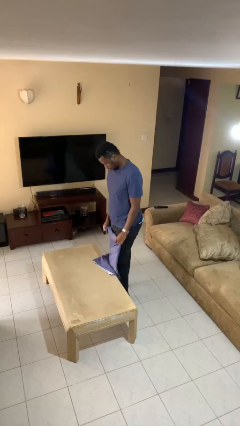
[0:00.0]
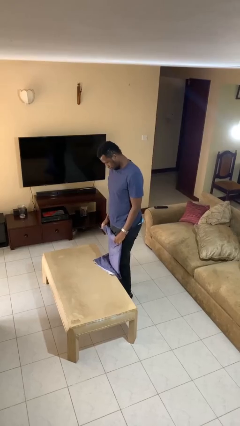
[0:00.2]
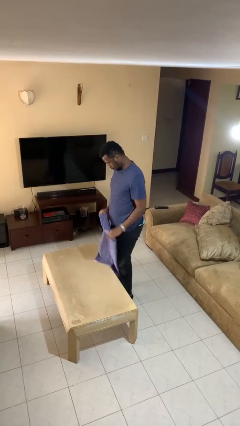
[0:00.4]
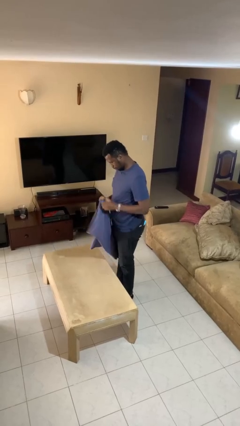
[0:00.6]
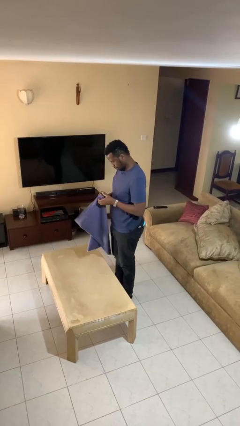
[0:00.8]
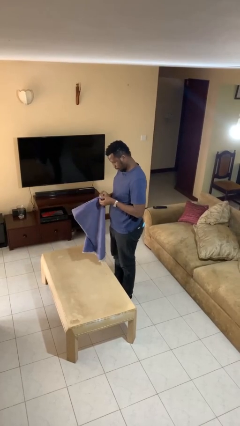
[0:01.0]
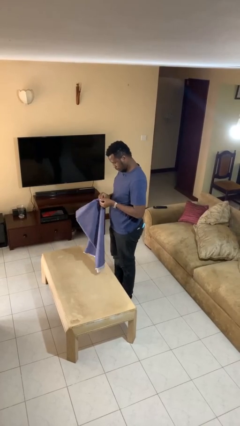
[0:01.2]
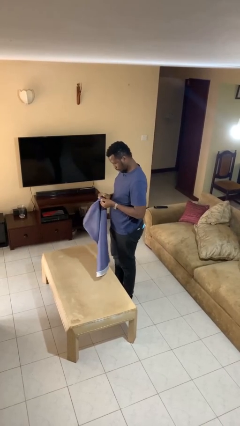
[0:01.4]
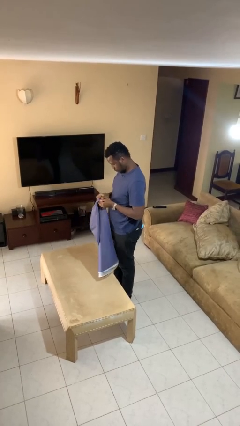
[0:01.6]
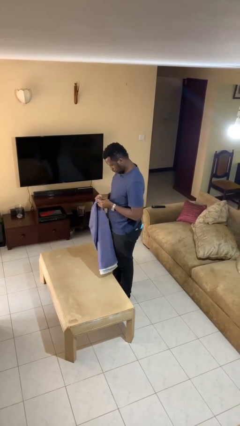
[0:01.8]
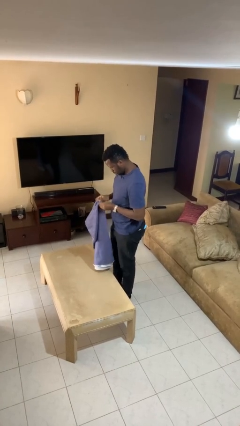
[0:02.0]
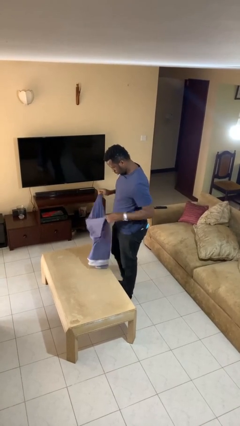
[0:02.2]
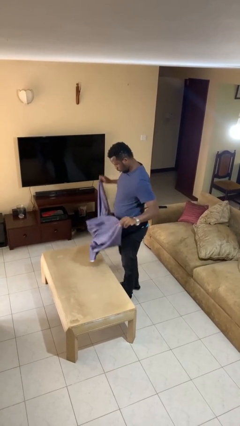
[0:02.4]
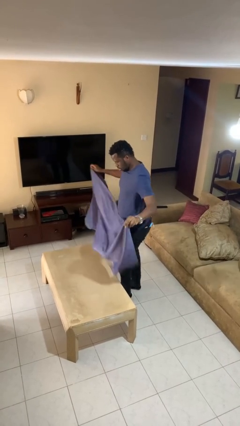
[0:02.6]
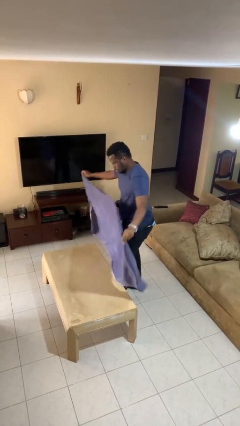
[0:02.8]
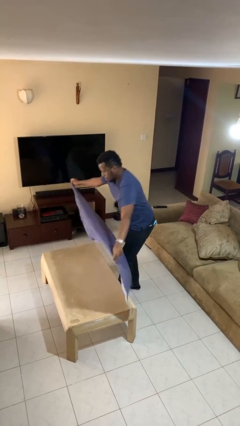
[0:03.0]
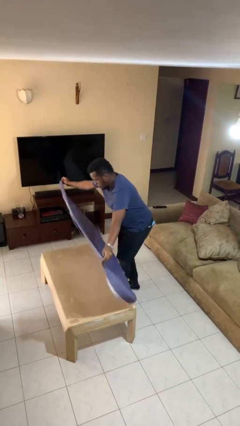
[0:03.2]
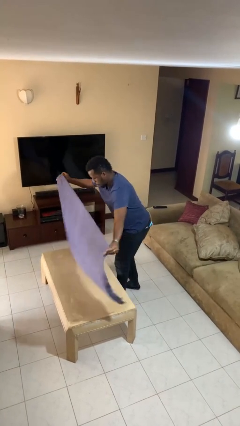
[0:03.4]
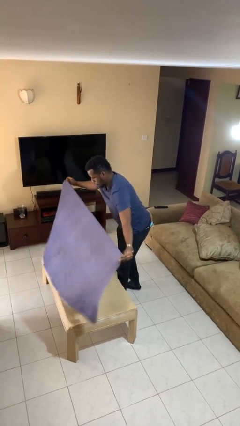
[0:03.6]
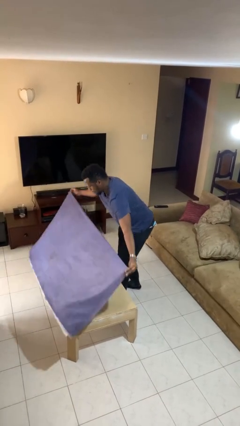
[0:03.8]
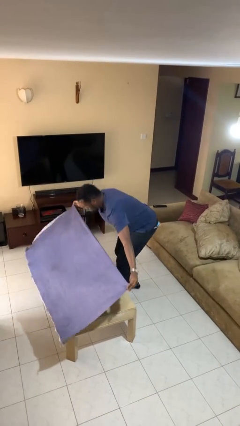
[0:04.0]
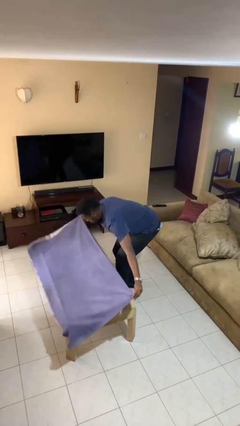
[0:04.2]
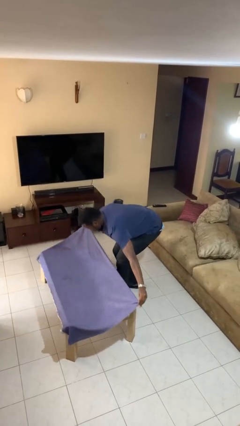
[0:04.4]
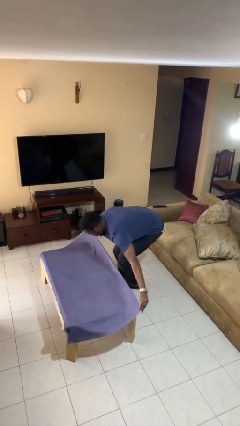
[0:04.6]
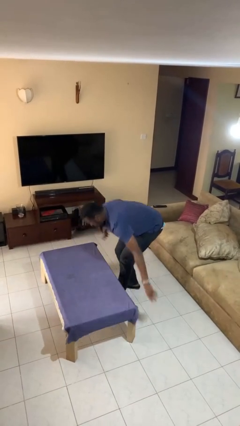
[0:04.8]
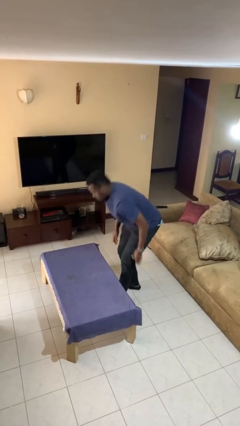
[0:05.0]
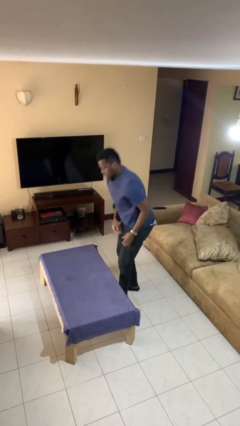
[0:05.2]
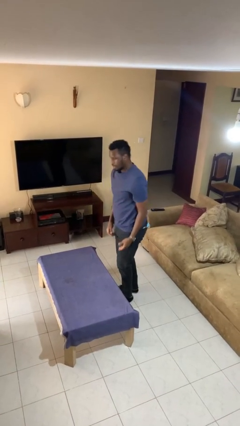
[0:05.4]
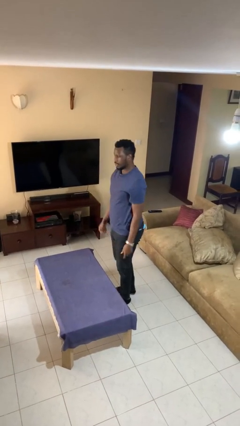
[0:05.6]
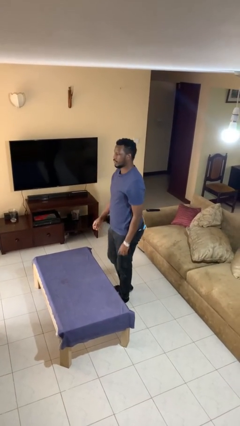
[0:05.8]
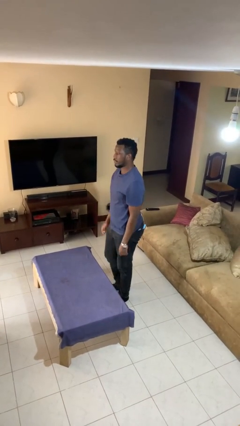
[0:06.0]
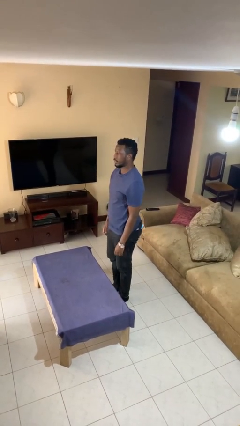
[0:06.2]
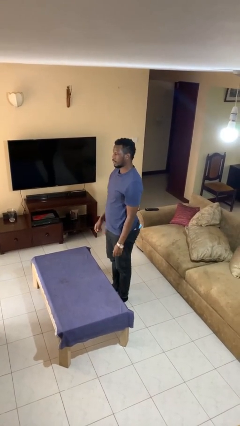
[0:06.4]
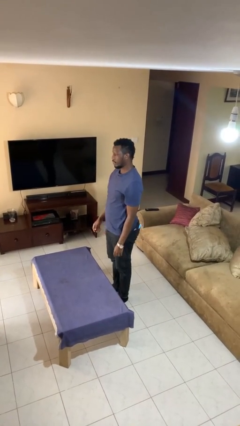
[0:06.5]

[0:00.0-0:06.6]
person spreads tablecloth

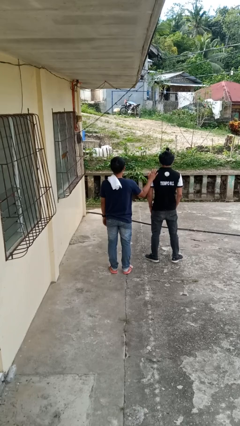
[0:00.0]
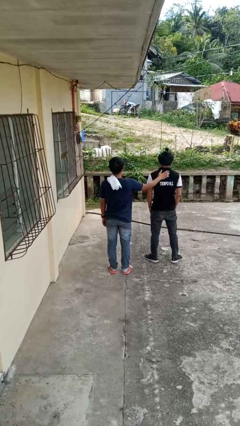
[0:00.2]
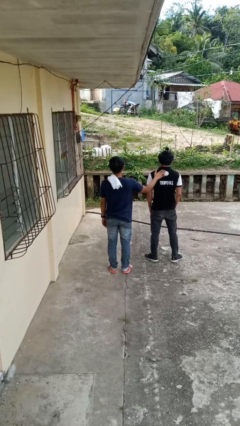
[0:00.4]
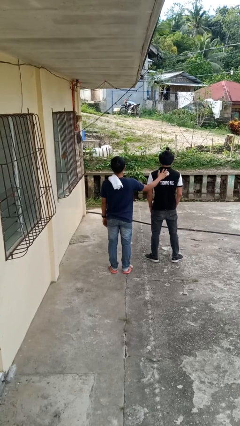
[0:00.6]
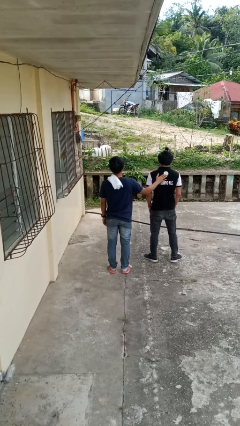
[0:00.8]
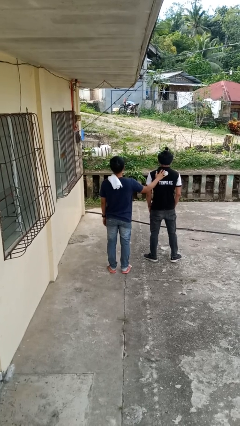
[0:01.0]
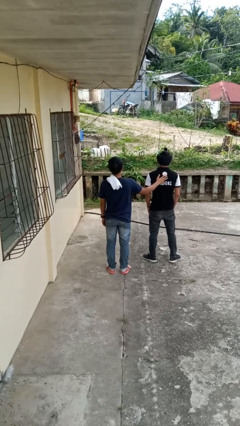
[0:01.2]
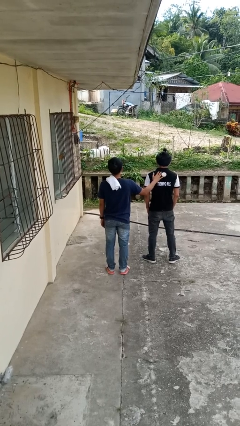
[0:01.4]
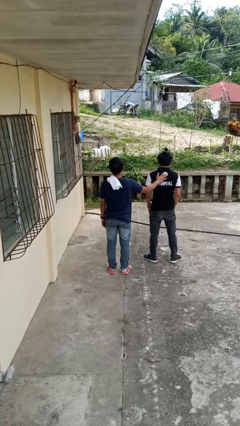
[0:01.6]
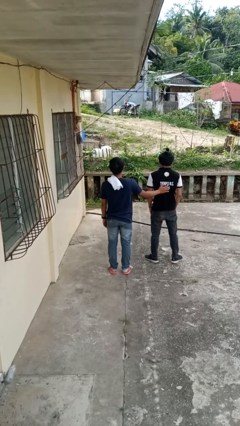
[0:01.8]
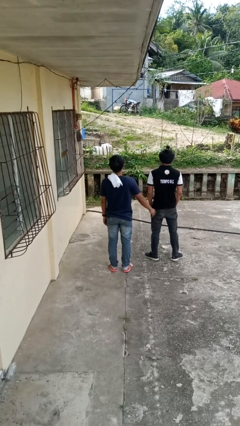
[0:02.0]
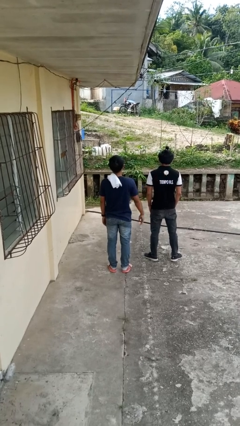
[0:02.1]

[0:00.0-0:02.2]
person touches back of person

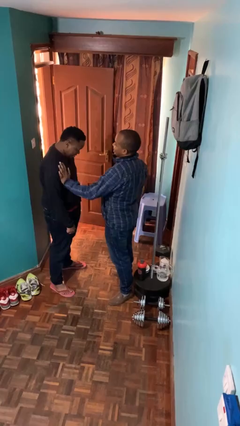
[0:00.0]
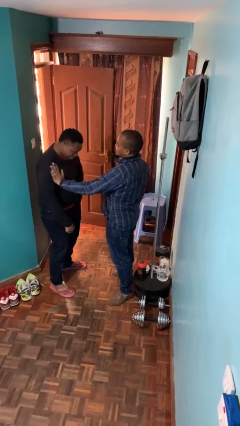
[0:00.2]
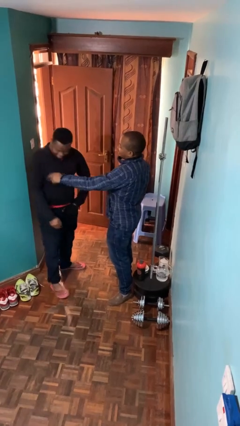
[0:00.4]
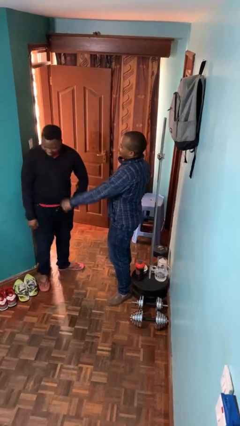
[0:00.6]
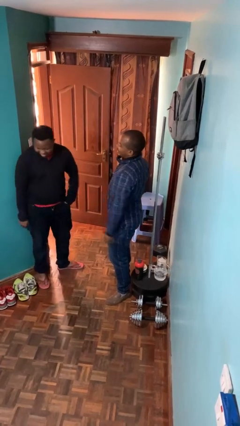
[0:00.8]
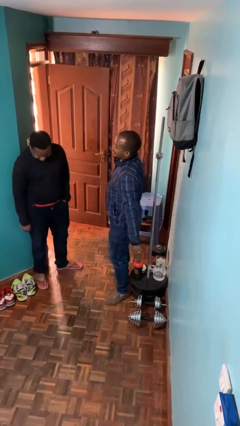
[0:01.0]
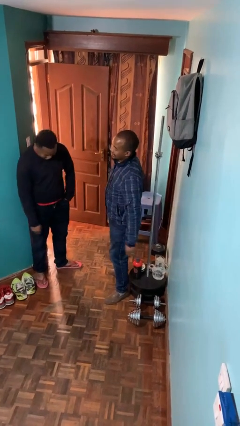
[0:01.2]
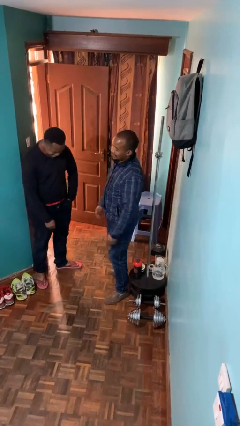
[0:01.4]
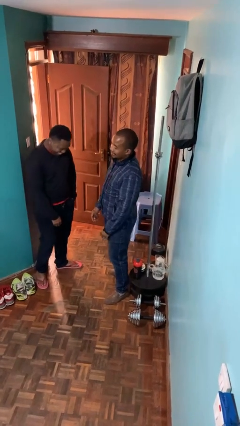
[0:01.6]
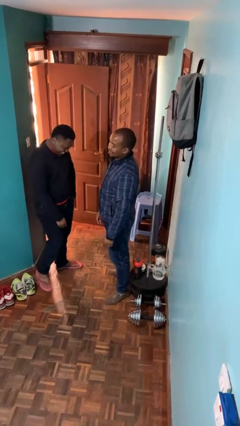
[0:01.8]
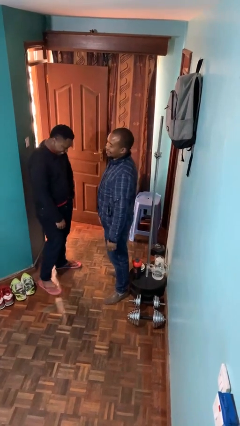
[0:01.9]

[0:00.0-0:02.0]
person shoves person

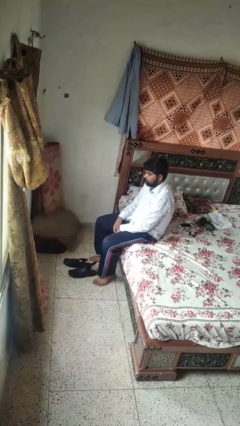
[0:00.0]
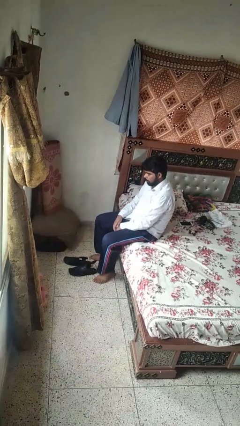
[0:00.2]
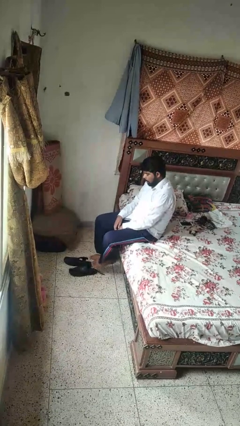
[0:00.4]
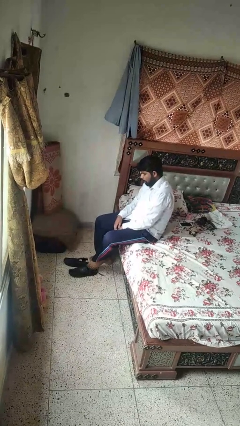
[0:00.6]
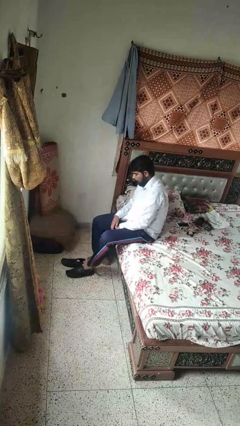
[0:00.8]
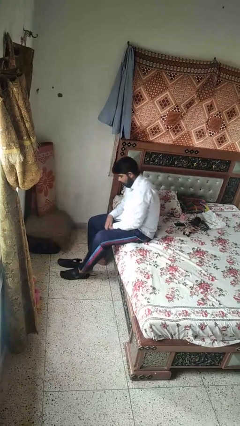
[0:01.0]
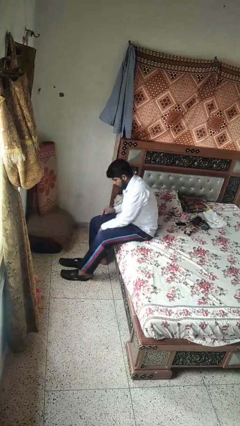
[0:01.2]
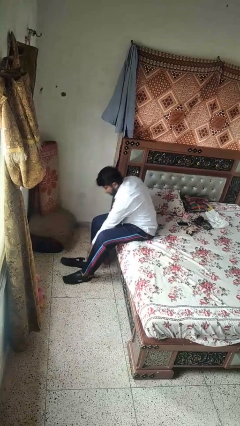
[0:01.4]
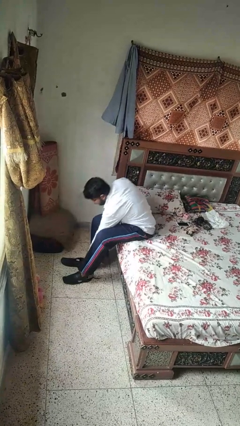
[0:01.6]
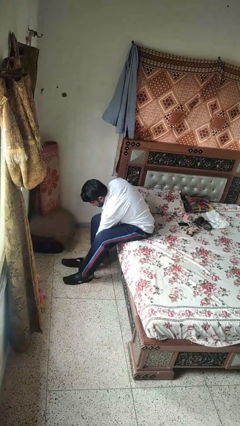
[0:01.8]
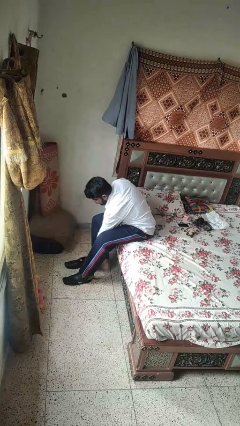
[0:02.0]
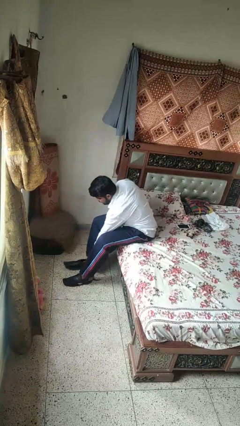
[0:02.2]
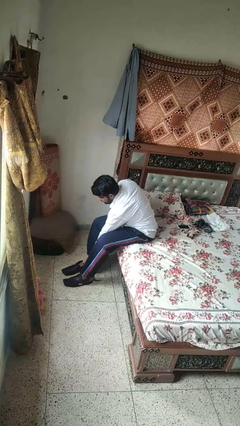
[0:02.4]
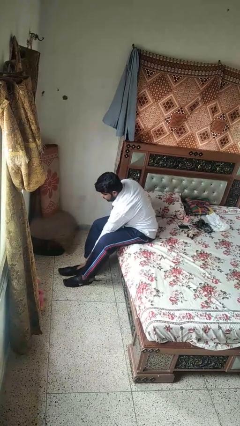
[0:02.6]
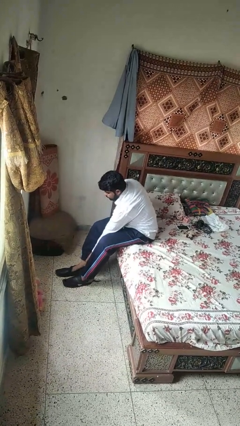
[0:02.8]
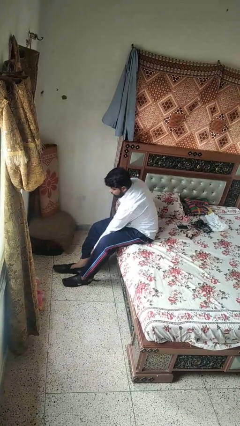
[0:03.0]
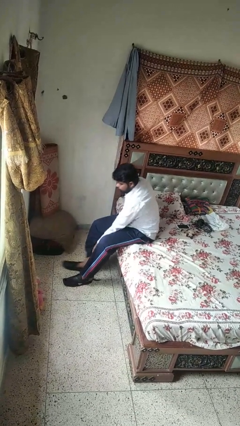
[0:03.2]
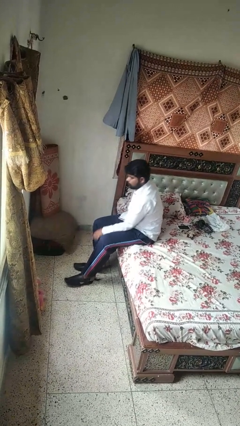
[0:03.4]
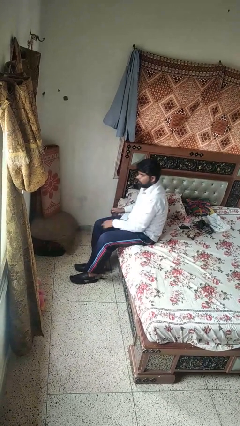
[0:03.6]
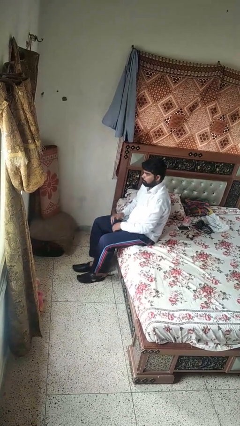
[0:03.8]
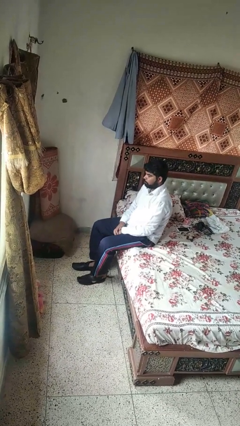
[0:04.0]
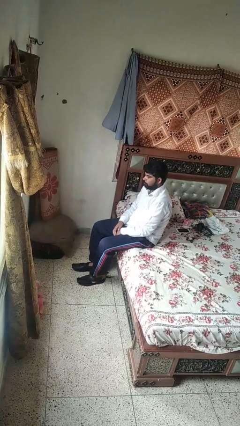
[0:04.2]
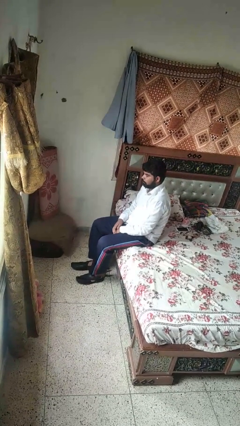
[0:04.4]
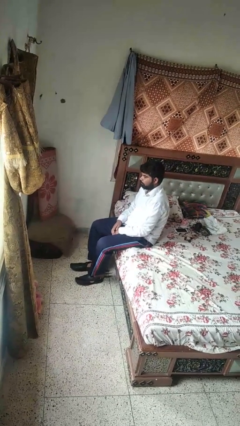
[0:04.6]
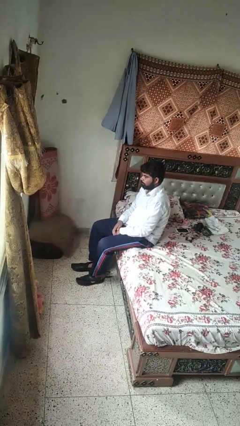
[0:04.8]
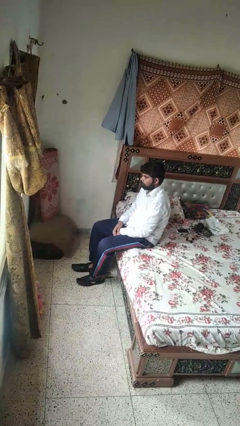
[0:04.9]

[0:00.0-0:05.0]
person puts on shoes

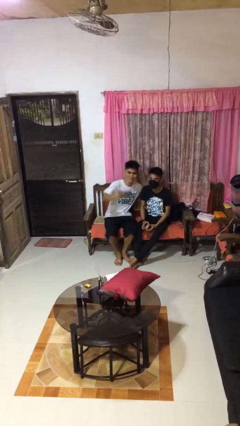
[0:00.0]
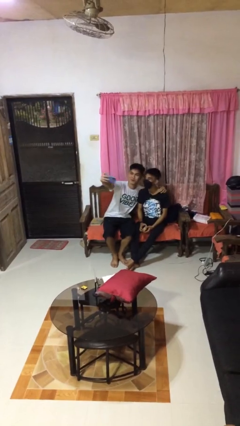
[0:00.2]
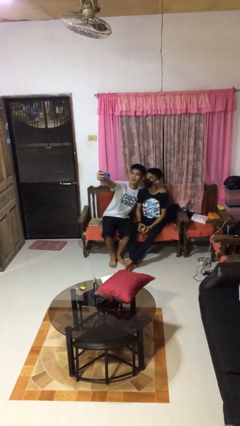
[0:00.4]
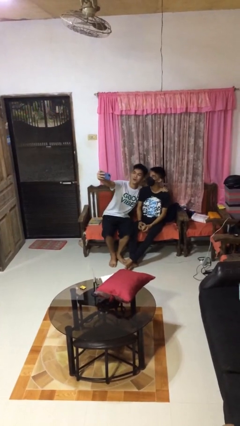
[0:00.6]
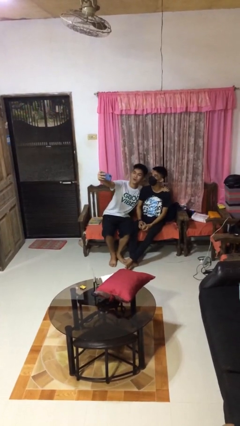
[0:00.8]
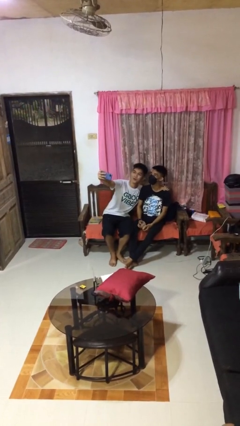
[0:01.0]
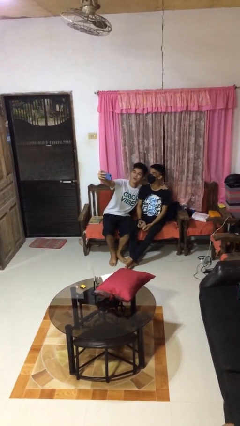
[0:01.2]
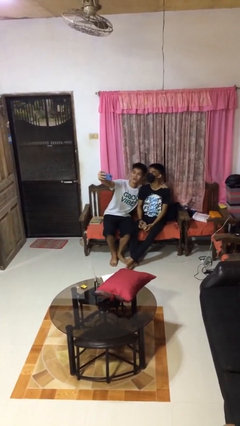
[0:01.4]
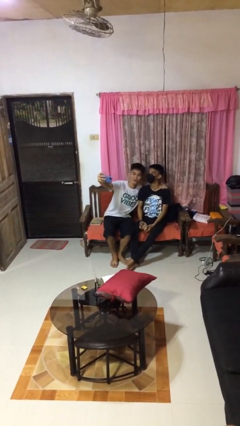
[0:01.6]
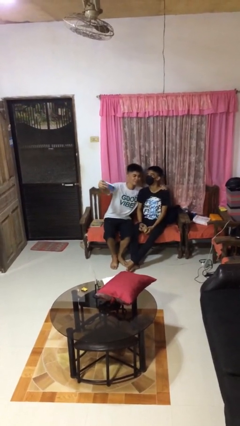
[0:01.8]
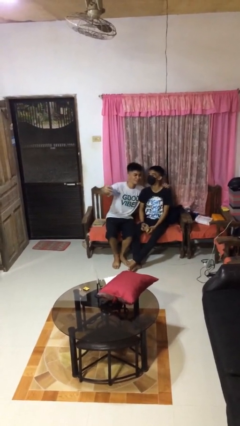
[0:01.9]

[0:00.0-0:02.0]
person takes selfie with person
